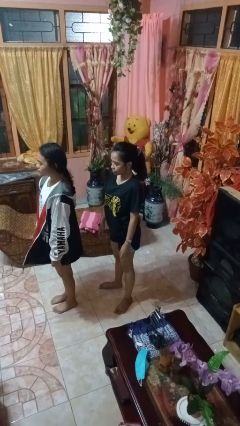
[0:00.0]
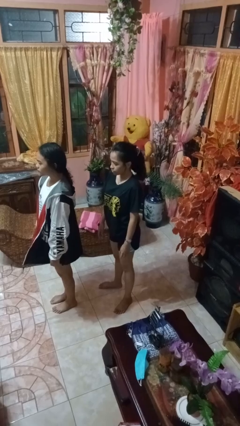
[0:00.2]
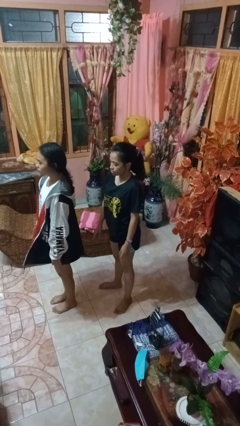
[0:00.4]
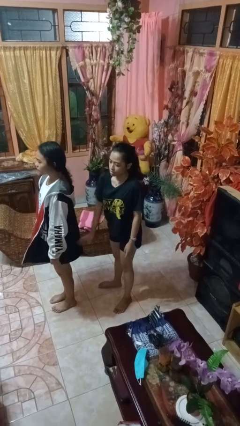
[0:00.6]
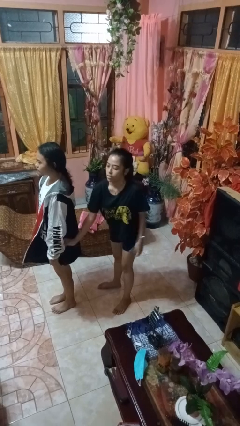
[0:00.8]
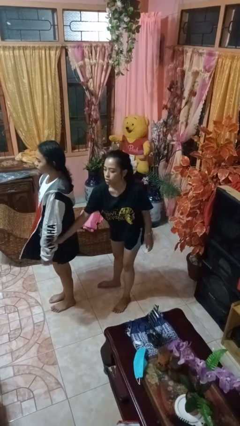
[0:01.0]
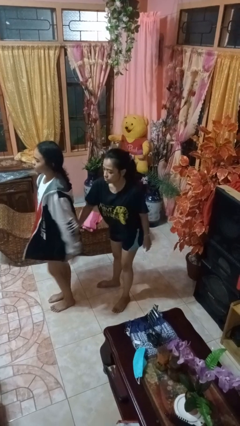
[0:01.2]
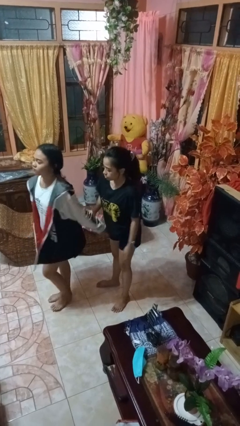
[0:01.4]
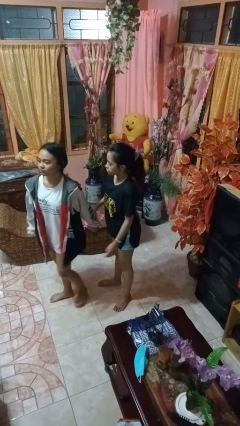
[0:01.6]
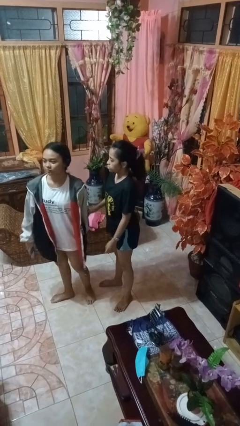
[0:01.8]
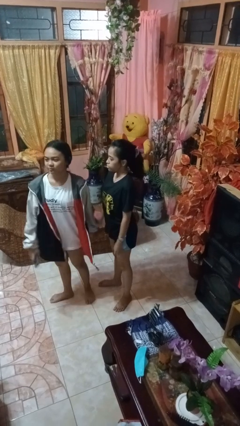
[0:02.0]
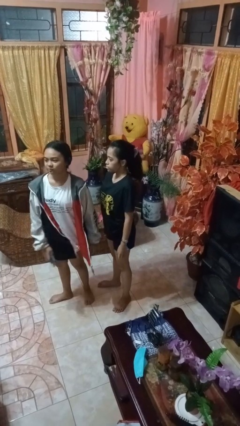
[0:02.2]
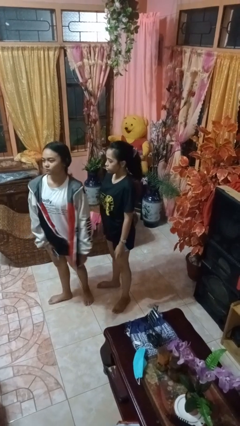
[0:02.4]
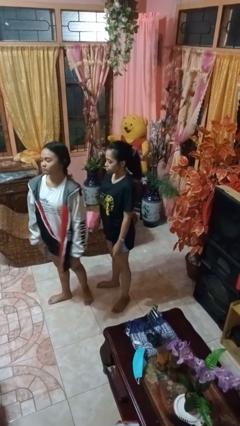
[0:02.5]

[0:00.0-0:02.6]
person grabs person by forearm

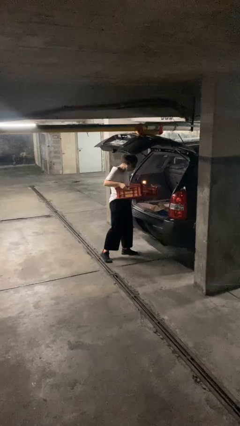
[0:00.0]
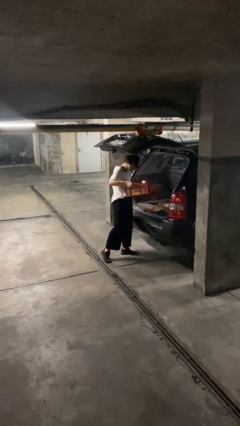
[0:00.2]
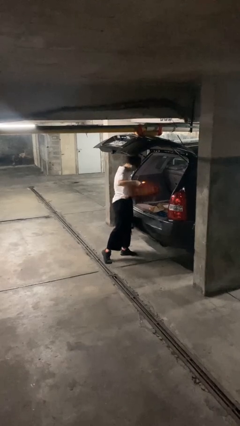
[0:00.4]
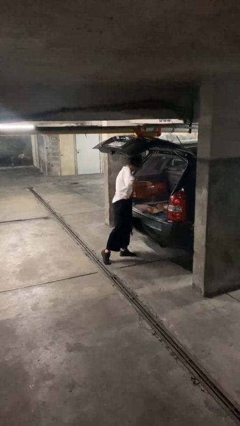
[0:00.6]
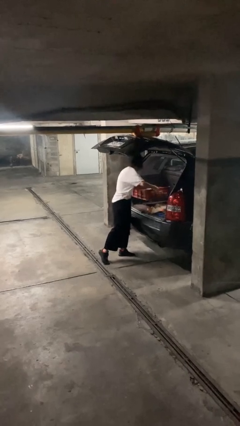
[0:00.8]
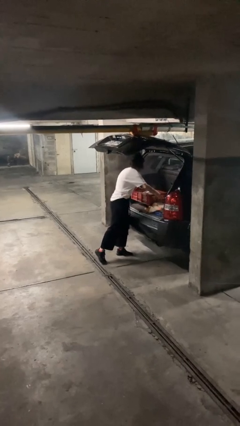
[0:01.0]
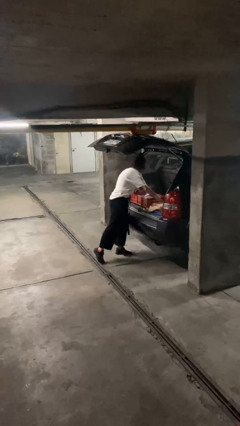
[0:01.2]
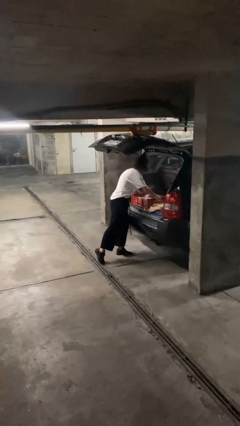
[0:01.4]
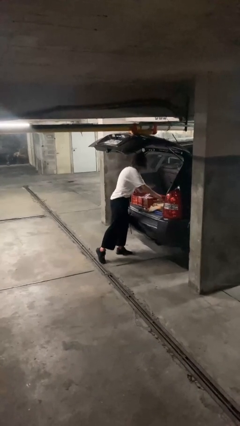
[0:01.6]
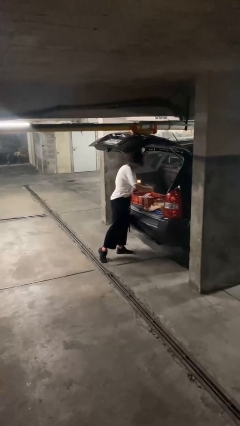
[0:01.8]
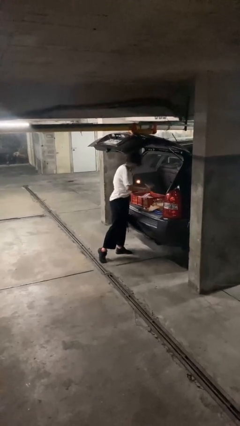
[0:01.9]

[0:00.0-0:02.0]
person loads car

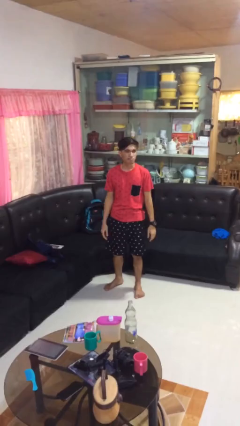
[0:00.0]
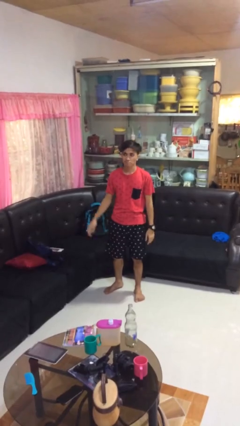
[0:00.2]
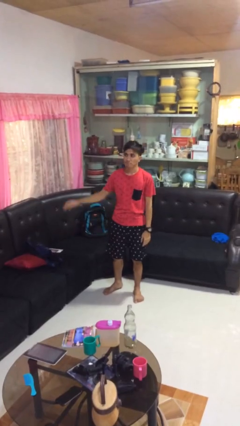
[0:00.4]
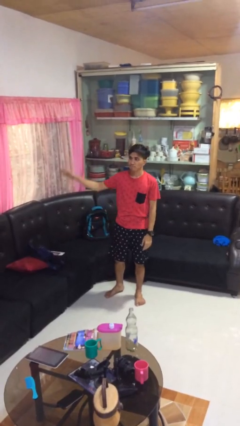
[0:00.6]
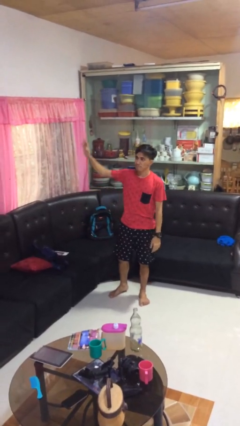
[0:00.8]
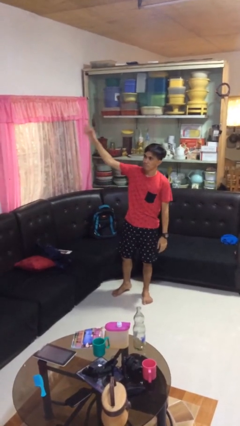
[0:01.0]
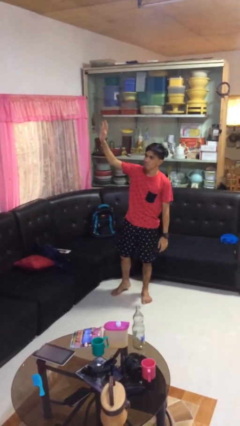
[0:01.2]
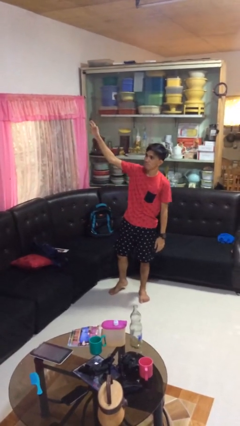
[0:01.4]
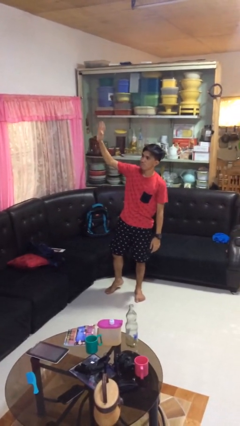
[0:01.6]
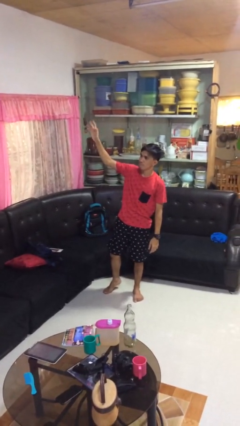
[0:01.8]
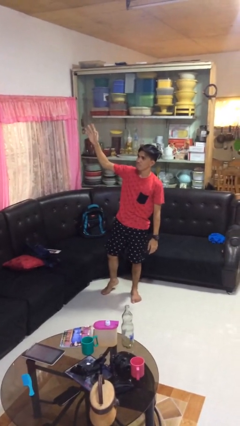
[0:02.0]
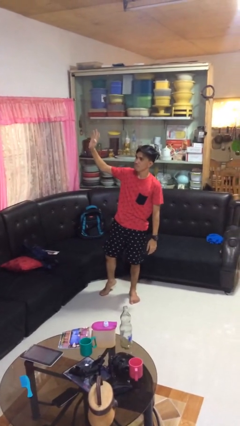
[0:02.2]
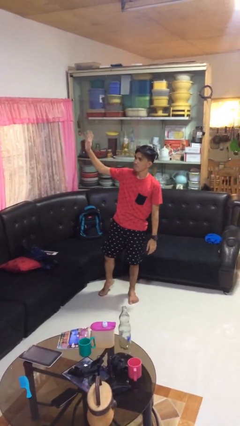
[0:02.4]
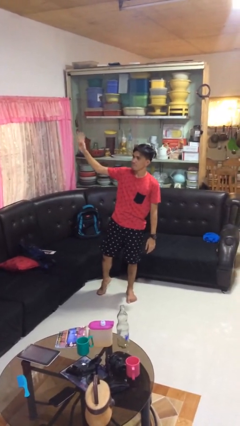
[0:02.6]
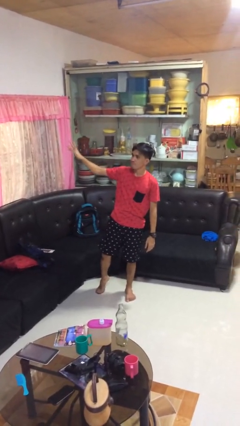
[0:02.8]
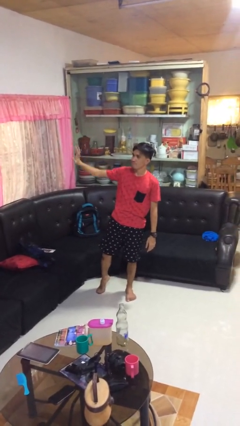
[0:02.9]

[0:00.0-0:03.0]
person waves at person

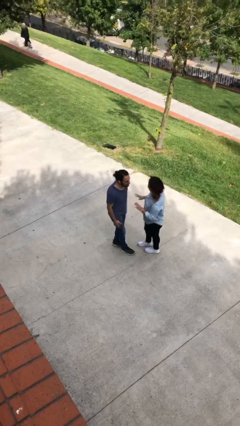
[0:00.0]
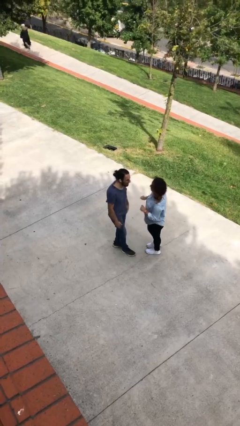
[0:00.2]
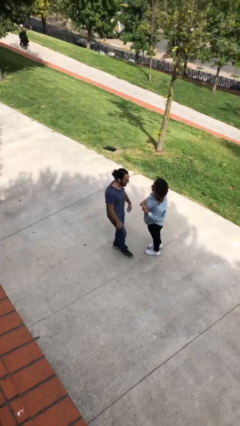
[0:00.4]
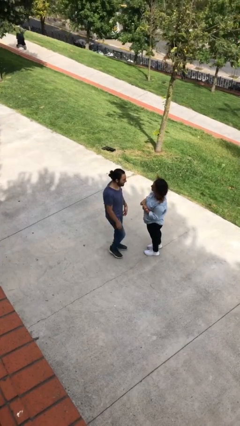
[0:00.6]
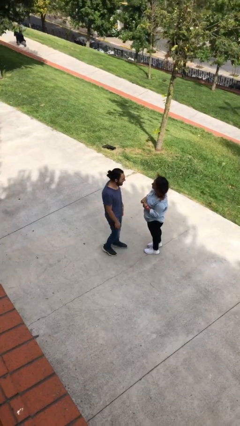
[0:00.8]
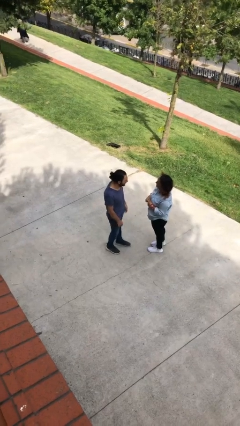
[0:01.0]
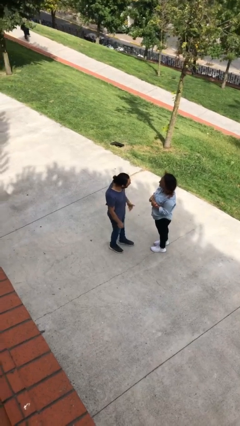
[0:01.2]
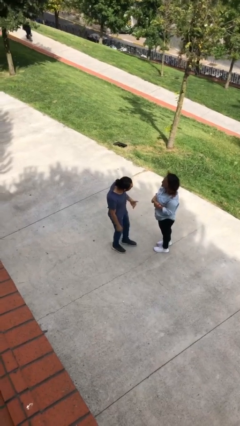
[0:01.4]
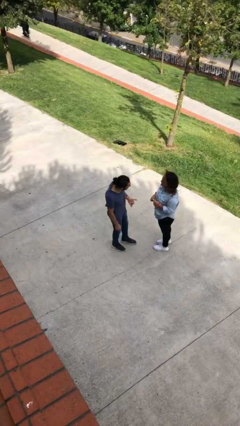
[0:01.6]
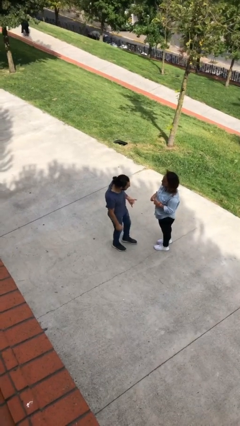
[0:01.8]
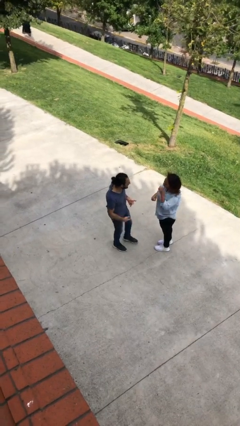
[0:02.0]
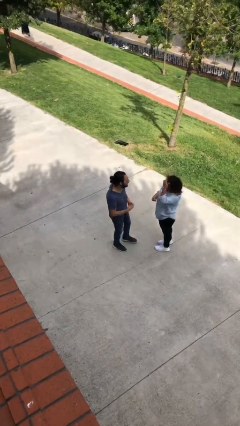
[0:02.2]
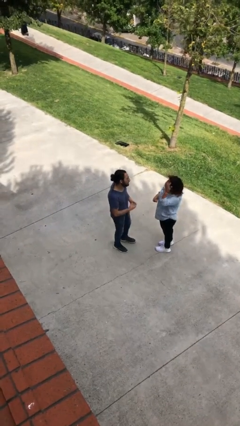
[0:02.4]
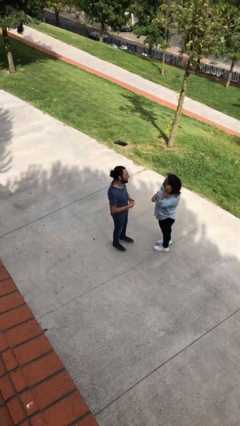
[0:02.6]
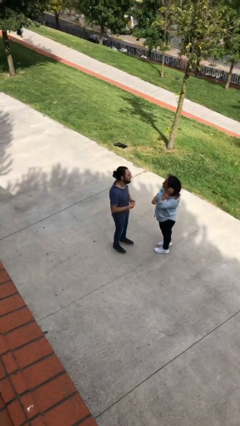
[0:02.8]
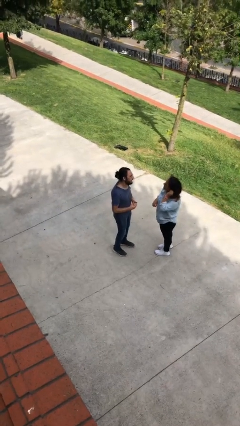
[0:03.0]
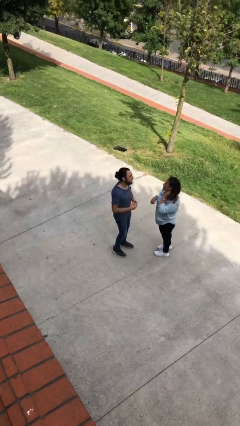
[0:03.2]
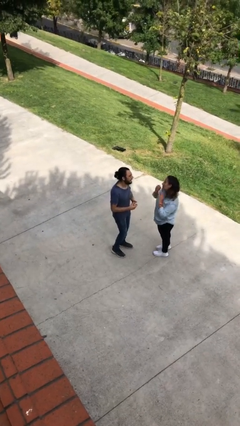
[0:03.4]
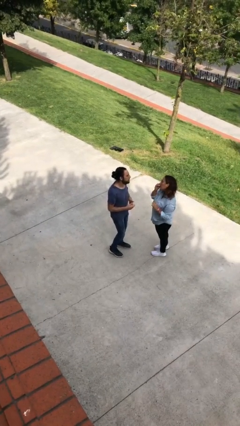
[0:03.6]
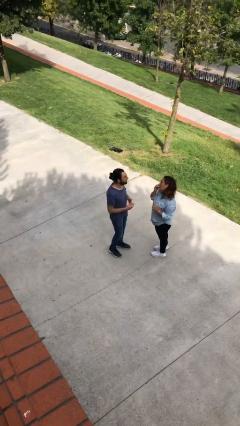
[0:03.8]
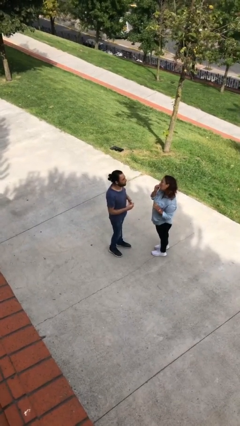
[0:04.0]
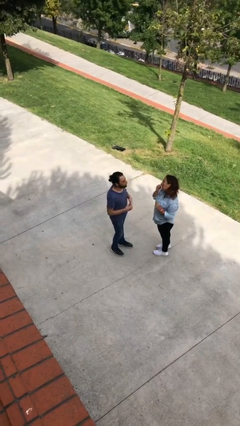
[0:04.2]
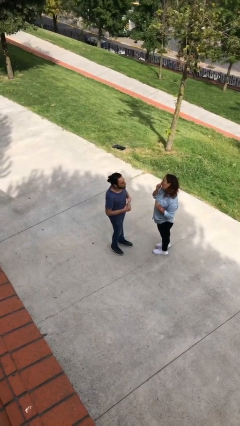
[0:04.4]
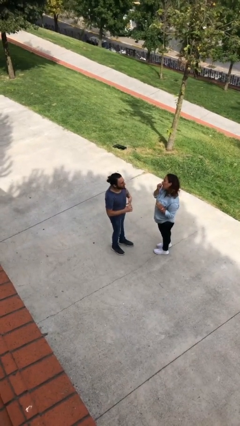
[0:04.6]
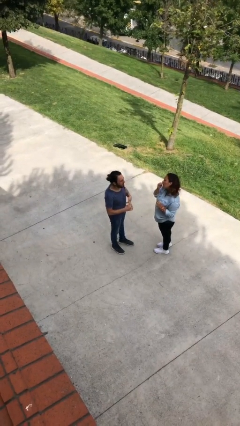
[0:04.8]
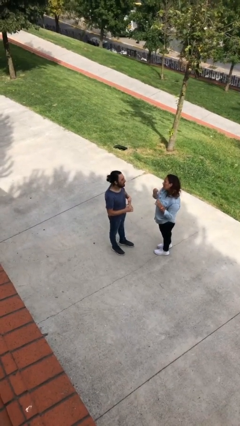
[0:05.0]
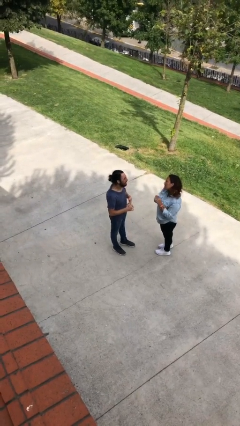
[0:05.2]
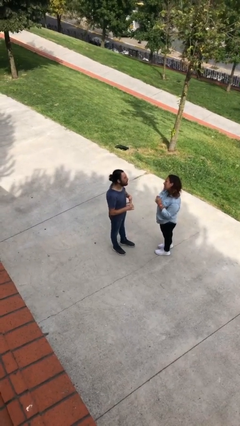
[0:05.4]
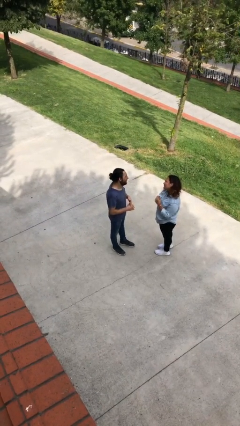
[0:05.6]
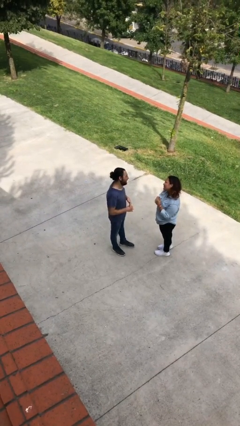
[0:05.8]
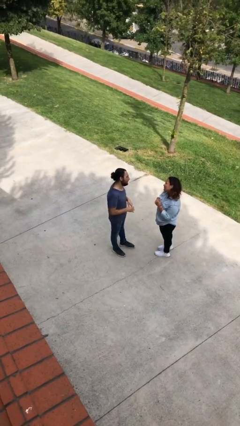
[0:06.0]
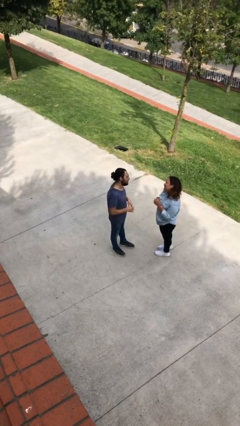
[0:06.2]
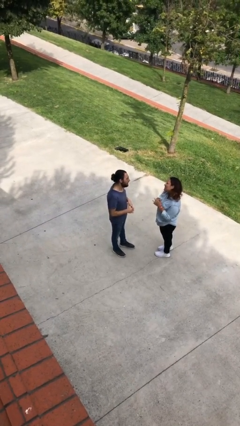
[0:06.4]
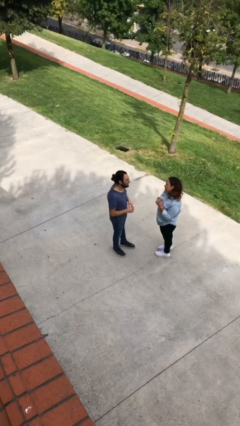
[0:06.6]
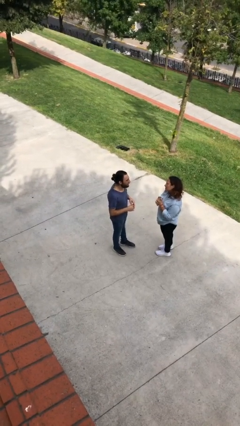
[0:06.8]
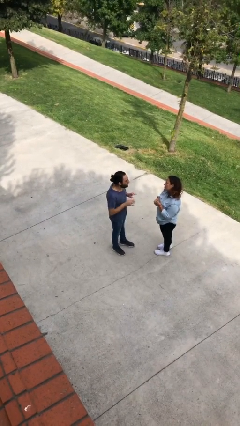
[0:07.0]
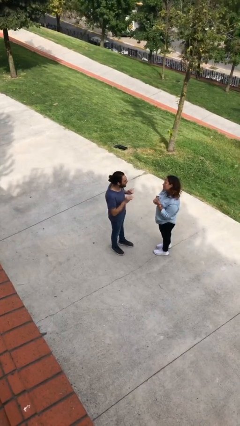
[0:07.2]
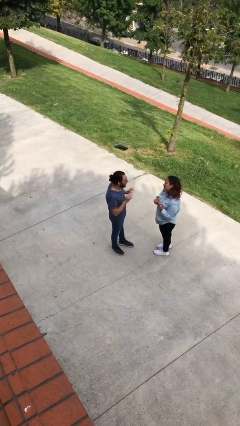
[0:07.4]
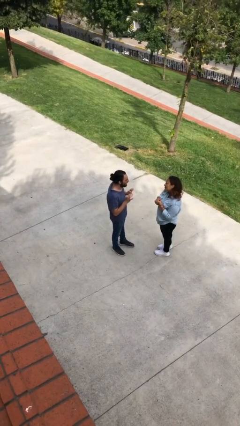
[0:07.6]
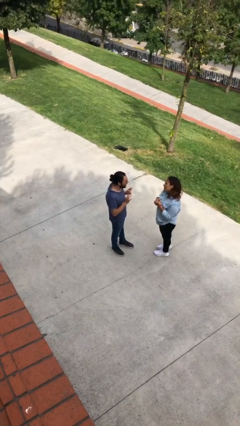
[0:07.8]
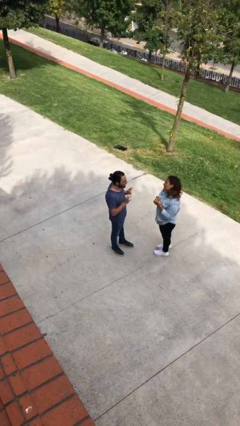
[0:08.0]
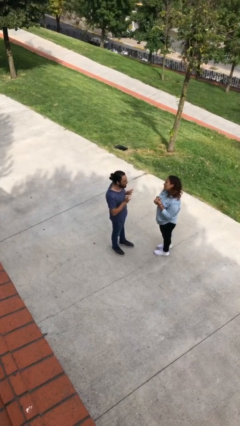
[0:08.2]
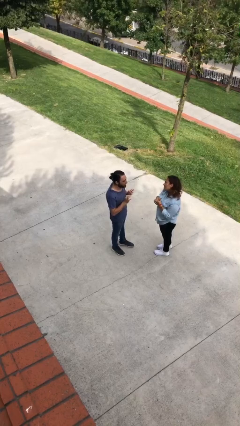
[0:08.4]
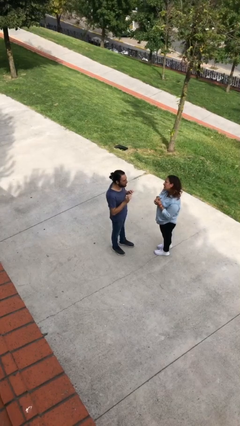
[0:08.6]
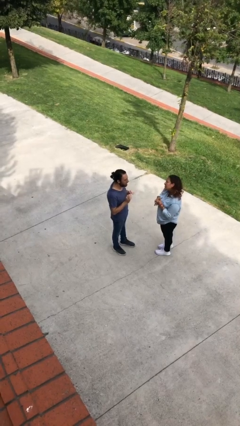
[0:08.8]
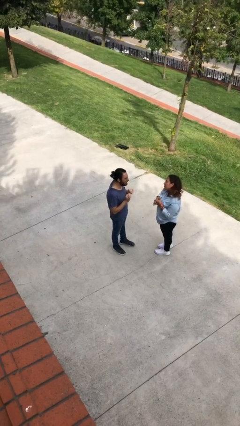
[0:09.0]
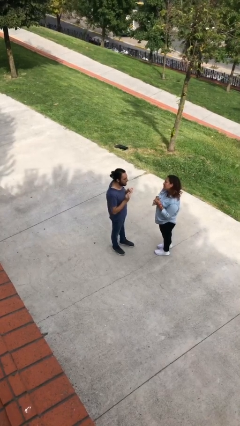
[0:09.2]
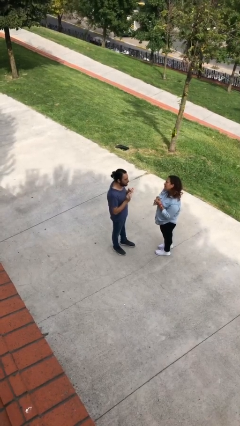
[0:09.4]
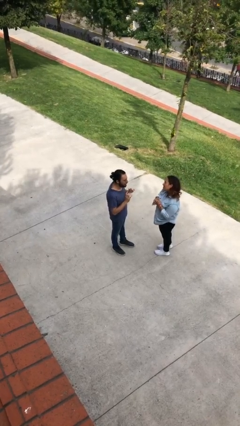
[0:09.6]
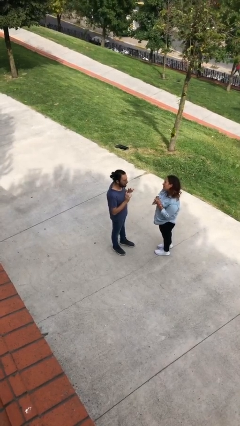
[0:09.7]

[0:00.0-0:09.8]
person talks to person

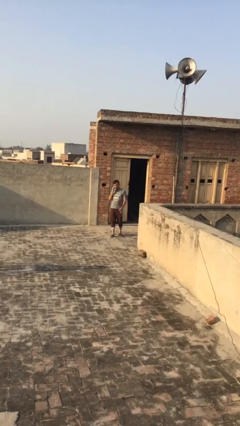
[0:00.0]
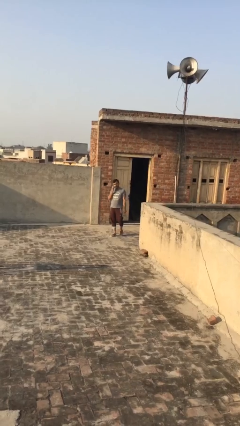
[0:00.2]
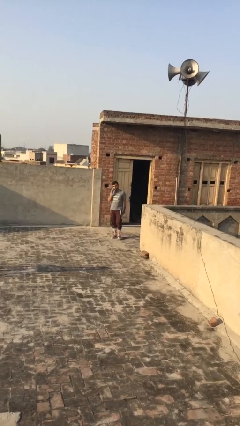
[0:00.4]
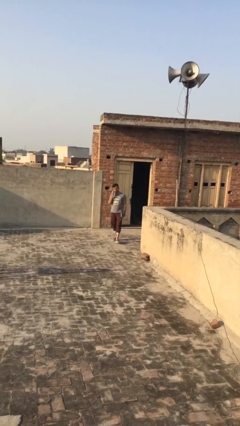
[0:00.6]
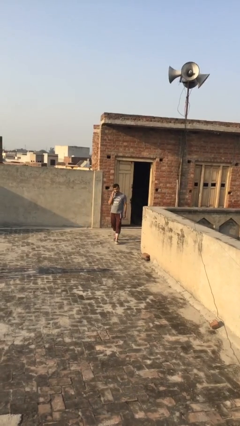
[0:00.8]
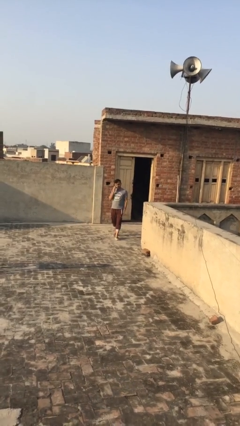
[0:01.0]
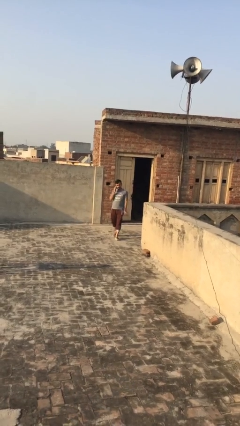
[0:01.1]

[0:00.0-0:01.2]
person enters scene through structure
